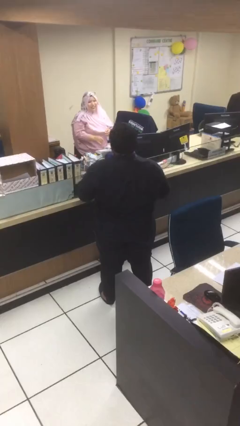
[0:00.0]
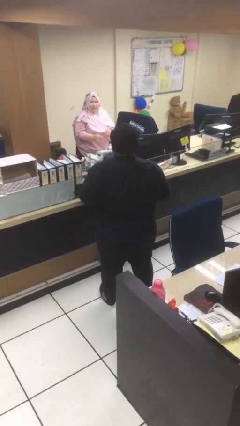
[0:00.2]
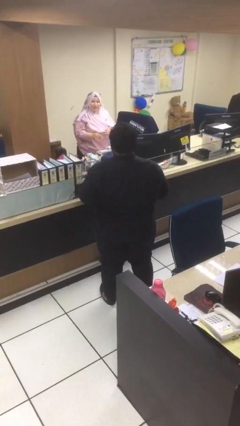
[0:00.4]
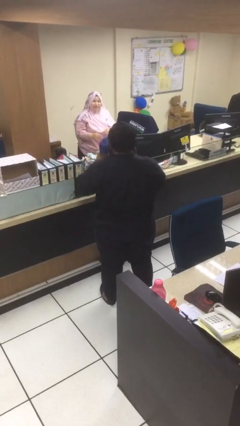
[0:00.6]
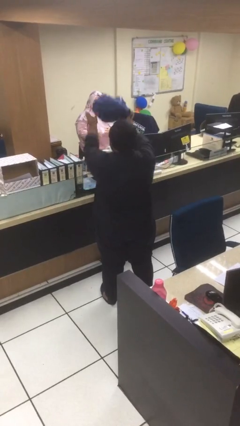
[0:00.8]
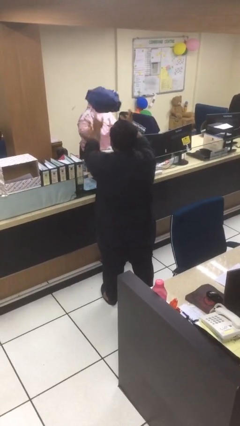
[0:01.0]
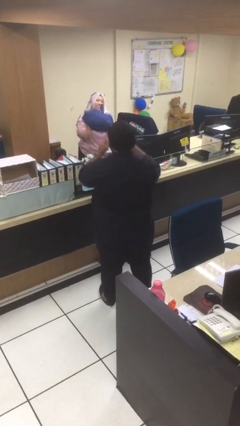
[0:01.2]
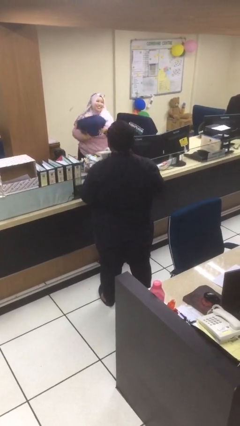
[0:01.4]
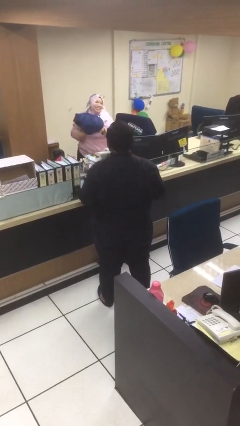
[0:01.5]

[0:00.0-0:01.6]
person throws object to person

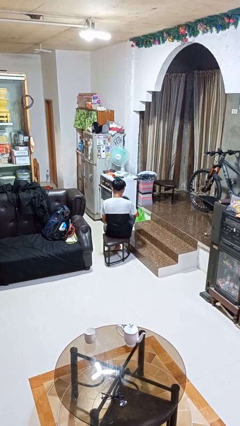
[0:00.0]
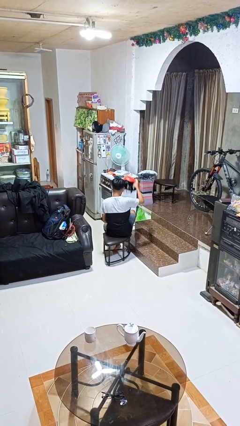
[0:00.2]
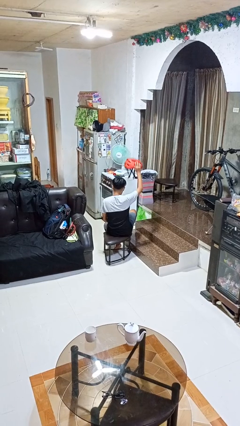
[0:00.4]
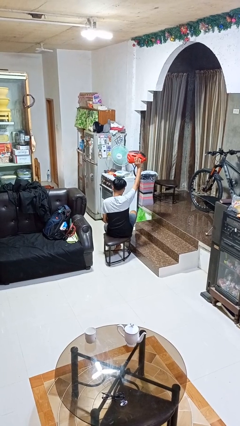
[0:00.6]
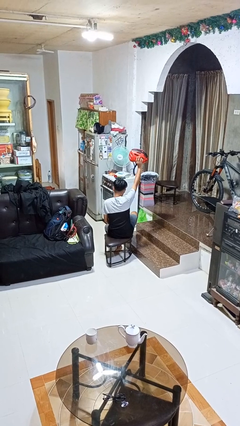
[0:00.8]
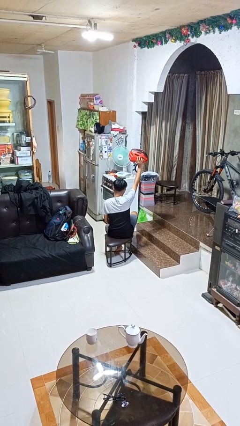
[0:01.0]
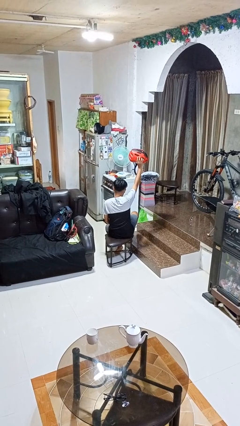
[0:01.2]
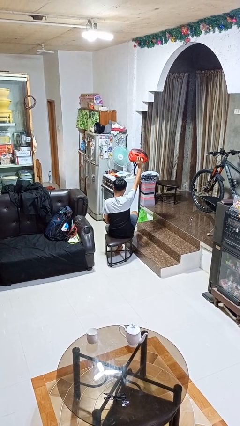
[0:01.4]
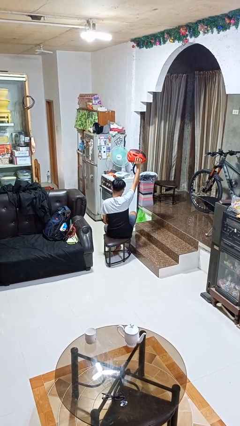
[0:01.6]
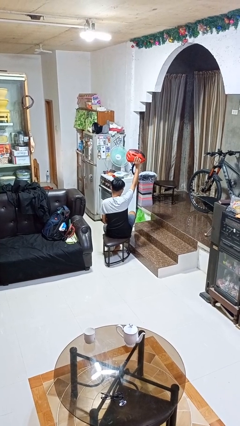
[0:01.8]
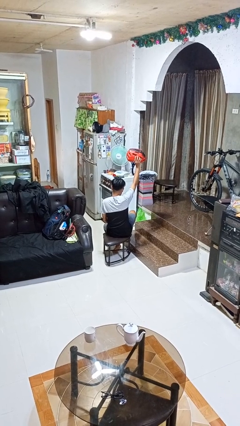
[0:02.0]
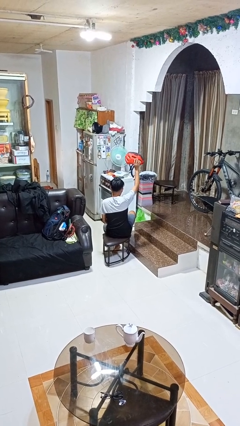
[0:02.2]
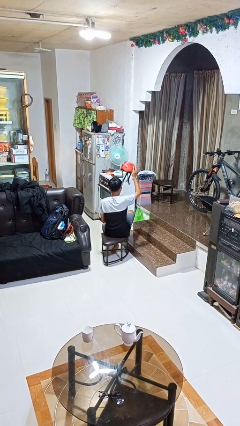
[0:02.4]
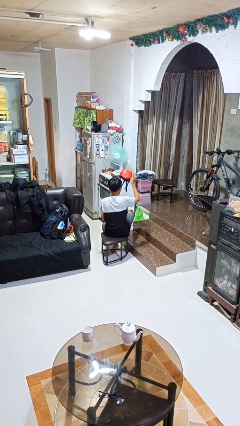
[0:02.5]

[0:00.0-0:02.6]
person holds object above head

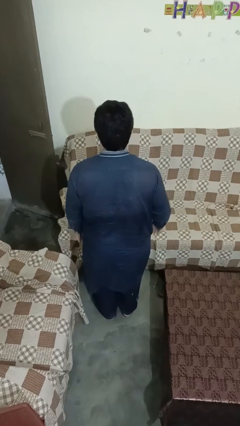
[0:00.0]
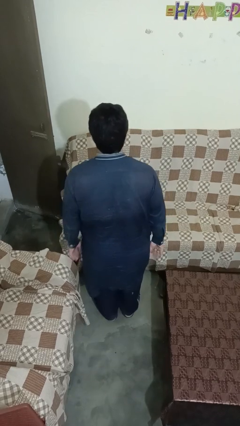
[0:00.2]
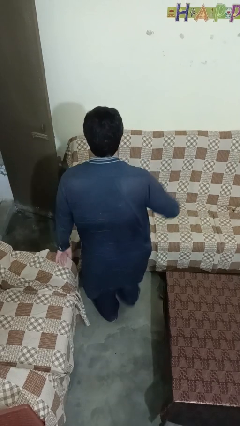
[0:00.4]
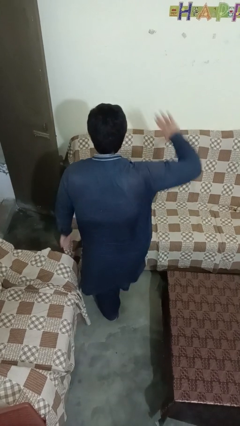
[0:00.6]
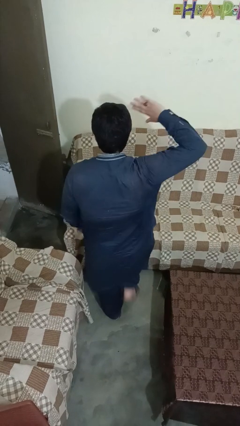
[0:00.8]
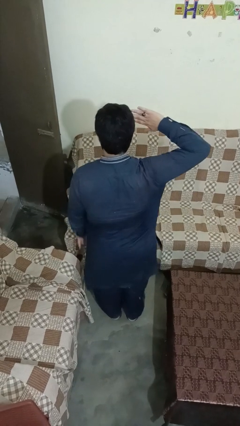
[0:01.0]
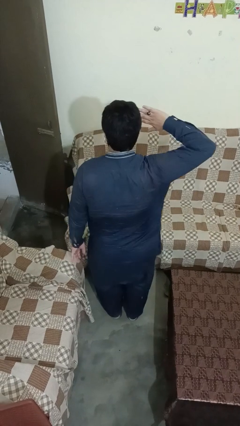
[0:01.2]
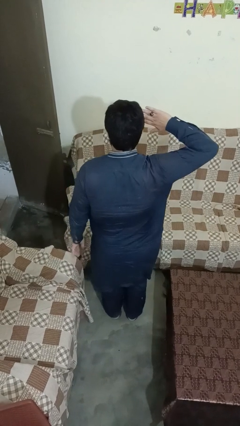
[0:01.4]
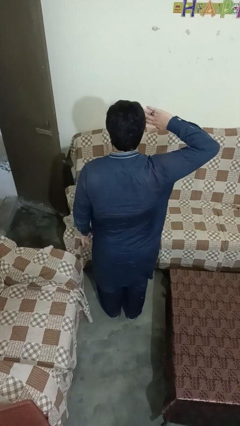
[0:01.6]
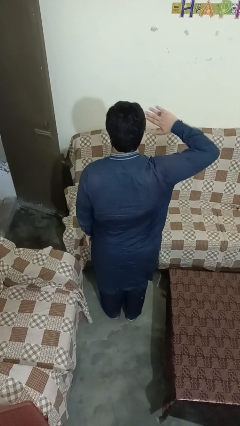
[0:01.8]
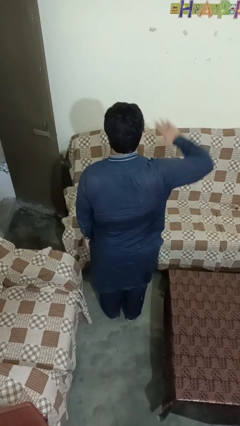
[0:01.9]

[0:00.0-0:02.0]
person salutes

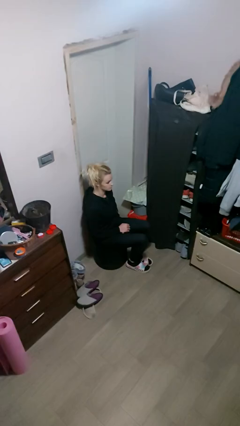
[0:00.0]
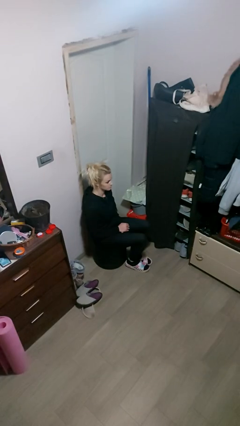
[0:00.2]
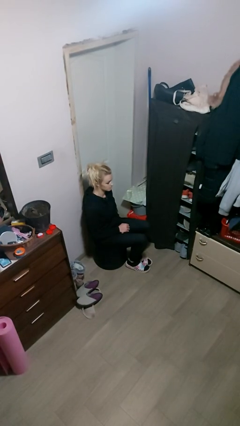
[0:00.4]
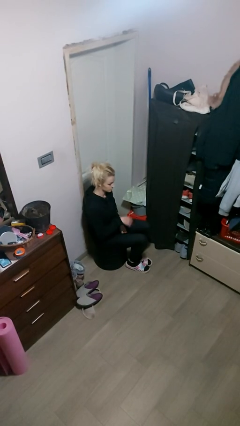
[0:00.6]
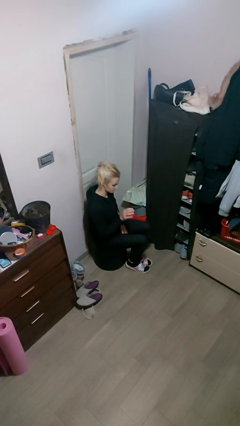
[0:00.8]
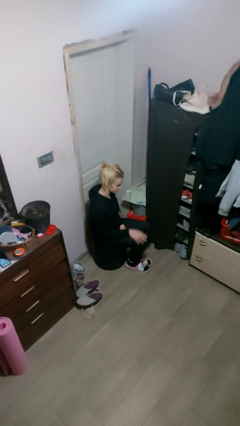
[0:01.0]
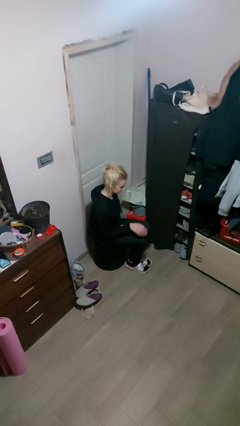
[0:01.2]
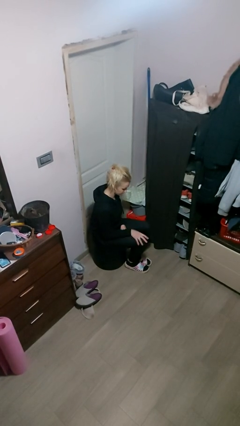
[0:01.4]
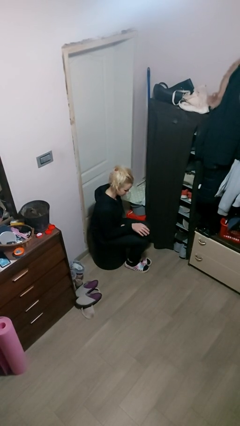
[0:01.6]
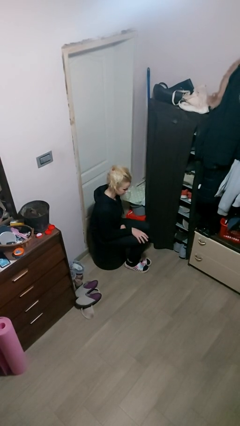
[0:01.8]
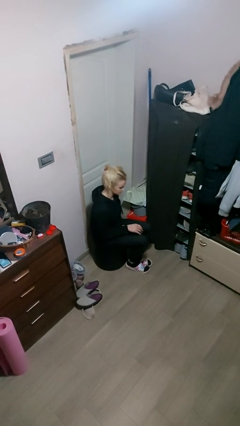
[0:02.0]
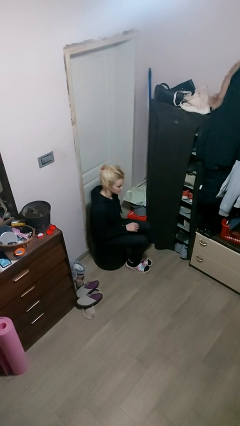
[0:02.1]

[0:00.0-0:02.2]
person slaps hands on thighs

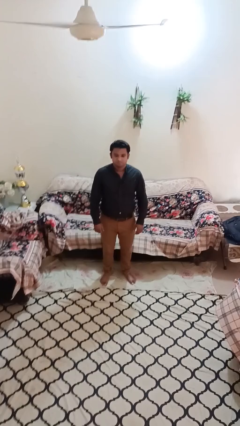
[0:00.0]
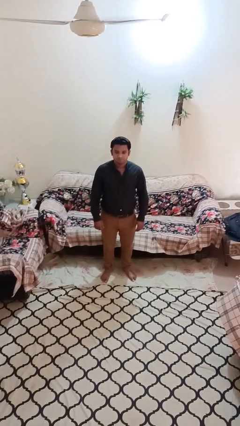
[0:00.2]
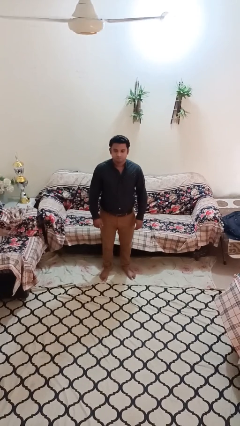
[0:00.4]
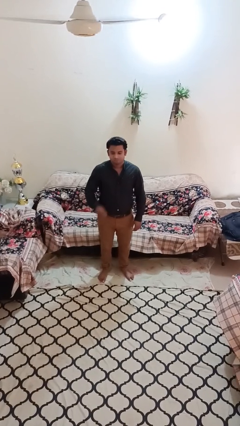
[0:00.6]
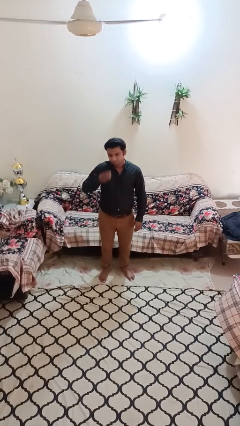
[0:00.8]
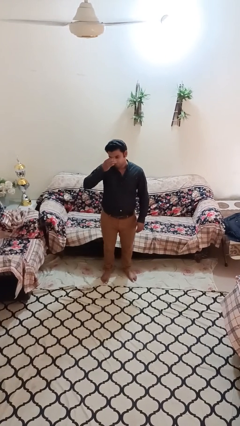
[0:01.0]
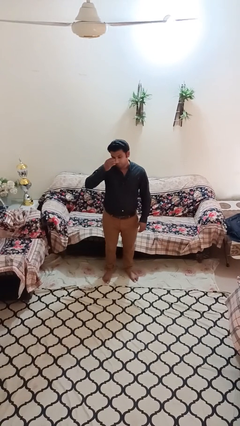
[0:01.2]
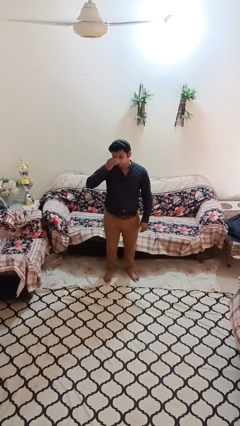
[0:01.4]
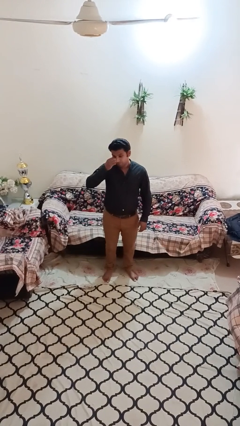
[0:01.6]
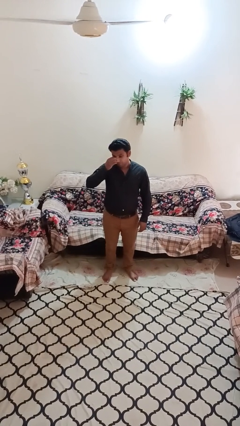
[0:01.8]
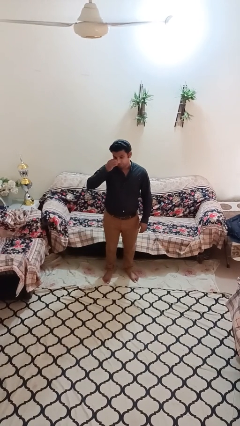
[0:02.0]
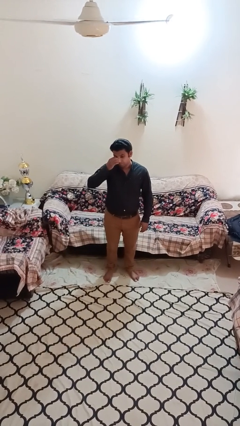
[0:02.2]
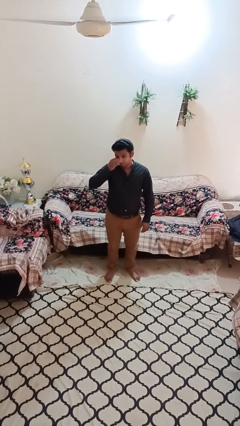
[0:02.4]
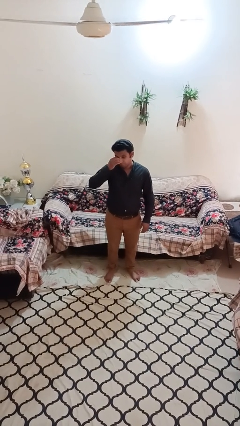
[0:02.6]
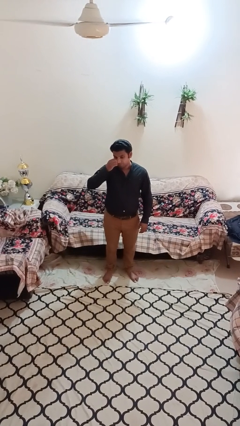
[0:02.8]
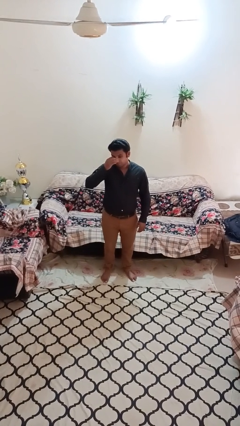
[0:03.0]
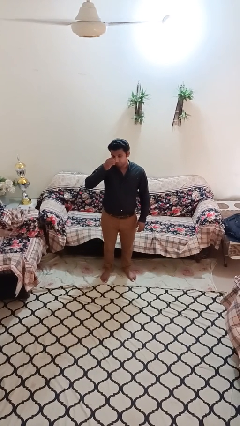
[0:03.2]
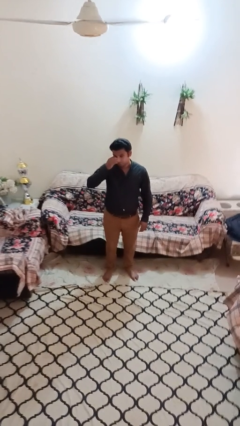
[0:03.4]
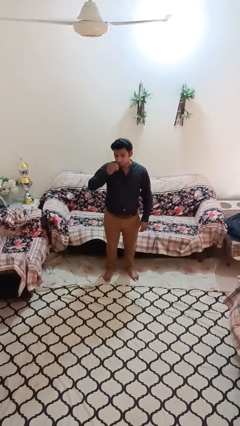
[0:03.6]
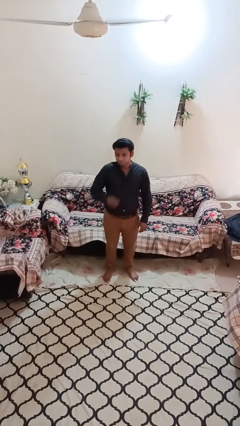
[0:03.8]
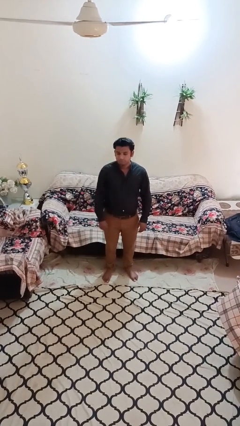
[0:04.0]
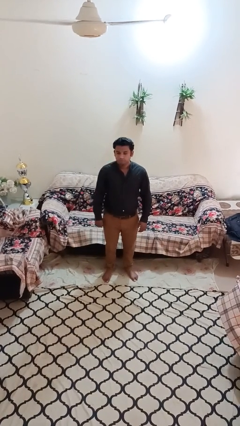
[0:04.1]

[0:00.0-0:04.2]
person scratches face

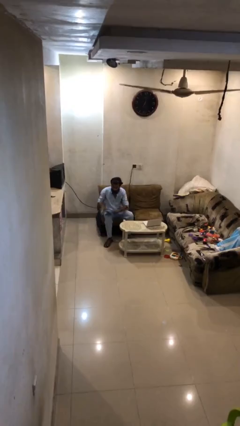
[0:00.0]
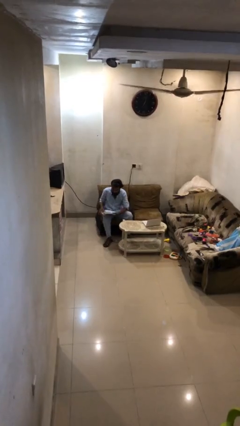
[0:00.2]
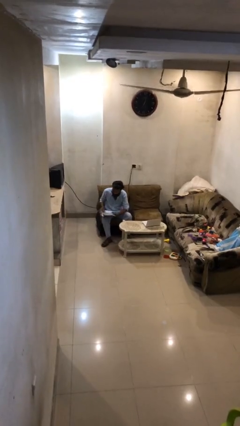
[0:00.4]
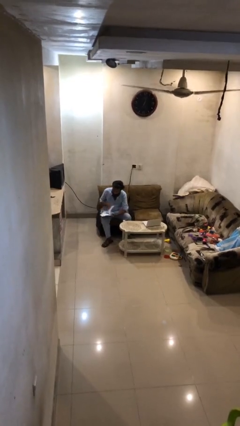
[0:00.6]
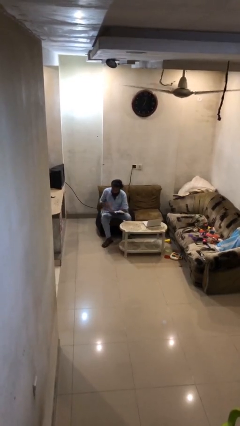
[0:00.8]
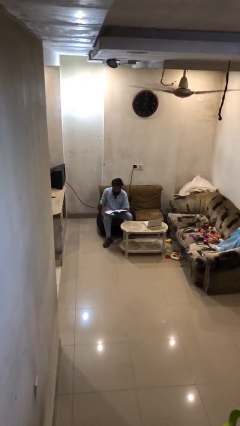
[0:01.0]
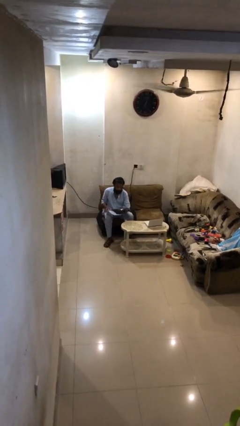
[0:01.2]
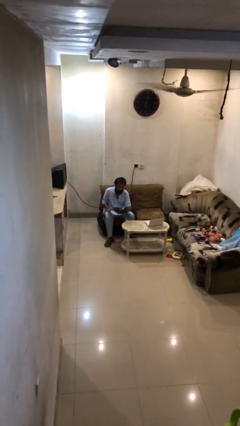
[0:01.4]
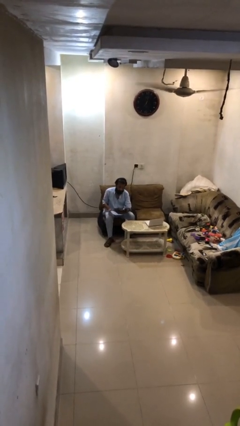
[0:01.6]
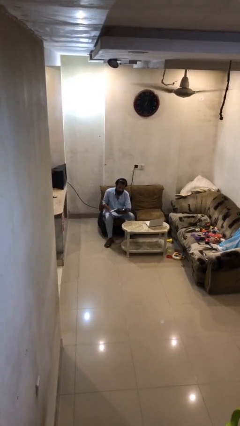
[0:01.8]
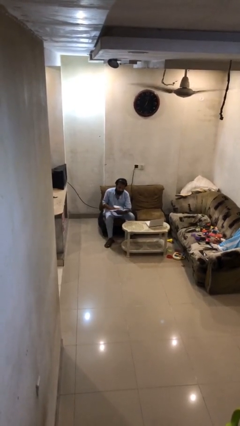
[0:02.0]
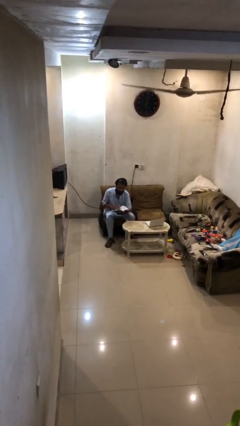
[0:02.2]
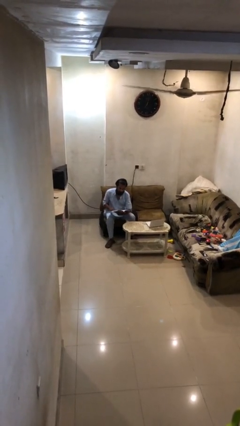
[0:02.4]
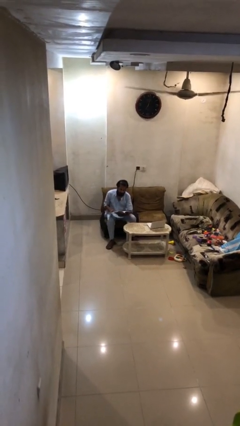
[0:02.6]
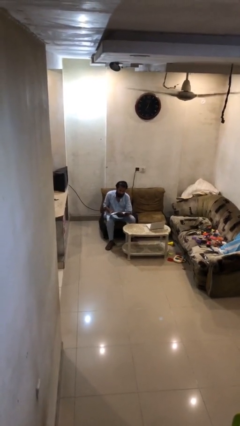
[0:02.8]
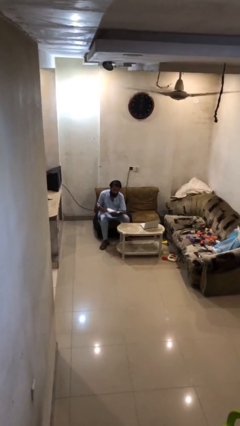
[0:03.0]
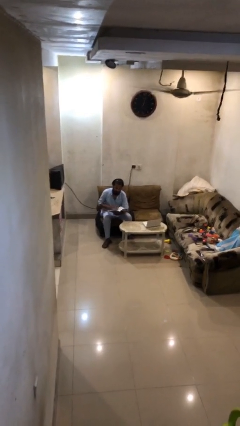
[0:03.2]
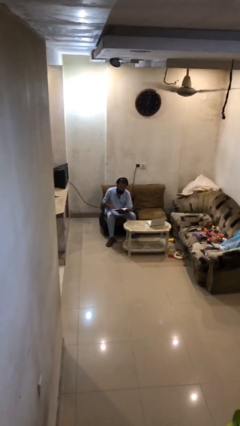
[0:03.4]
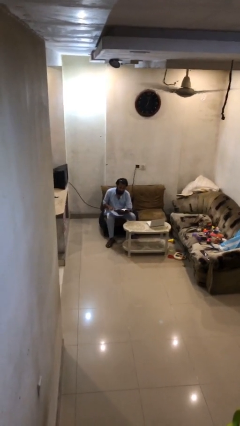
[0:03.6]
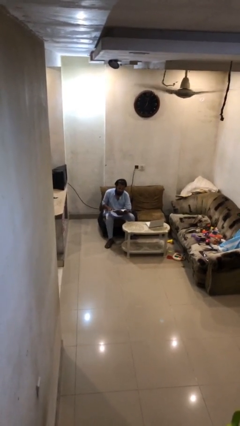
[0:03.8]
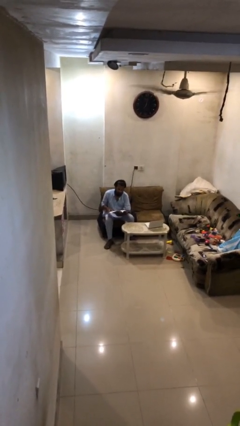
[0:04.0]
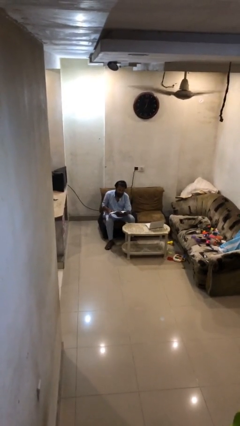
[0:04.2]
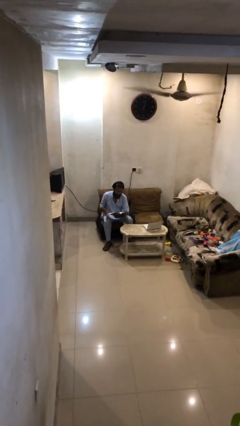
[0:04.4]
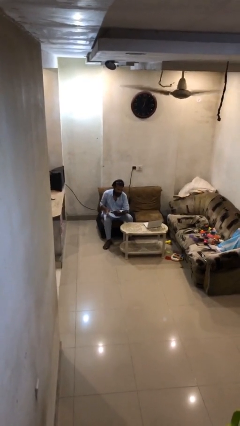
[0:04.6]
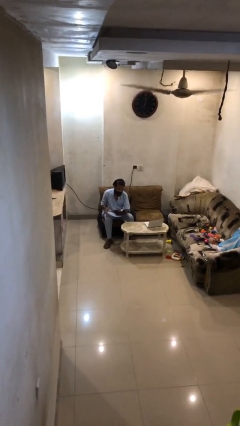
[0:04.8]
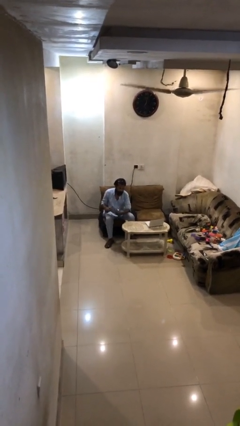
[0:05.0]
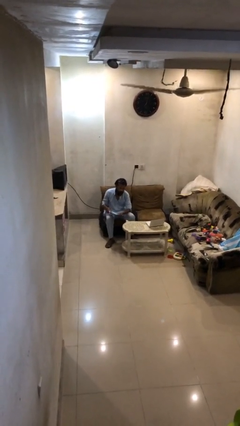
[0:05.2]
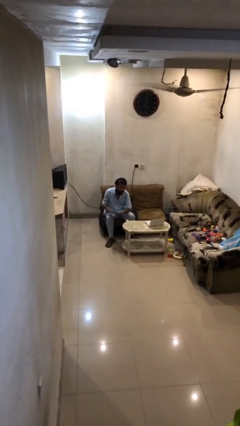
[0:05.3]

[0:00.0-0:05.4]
person reads document
